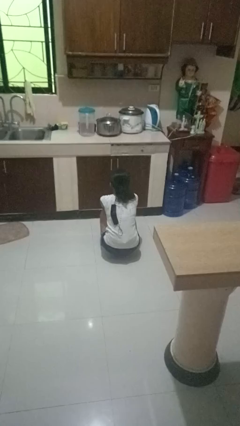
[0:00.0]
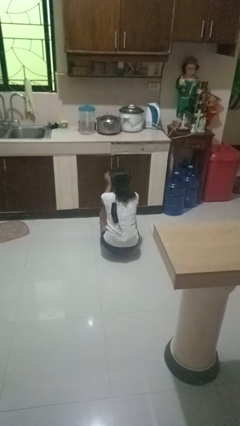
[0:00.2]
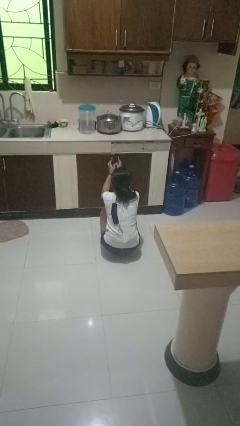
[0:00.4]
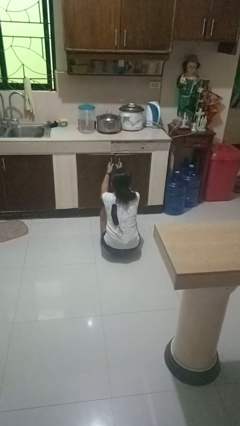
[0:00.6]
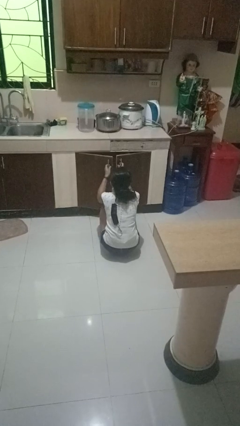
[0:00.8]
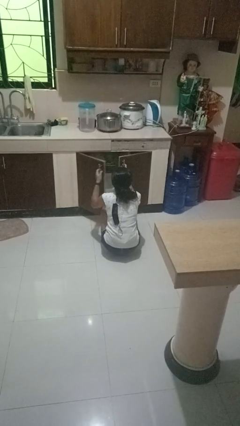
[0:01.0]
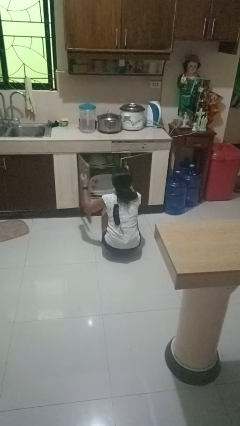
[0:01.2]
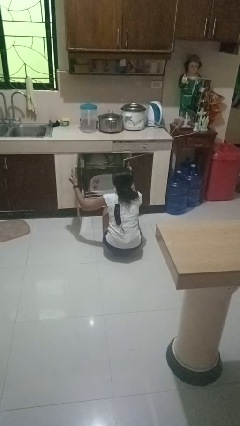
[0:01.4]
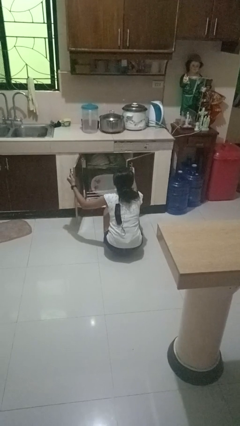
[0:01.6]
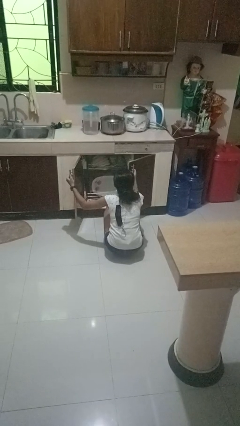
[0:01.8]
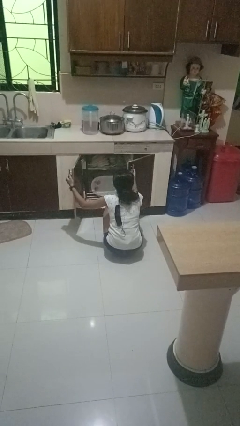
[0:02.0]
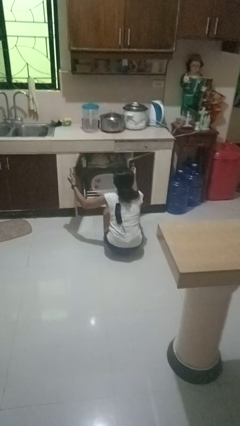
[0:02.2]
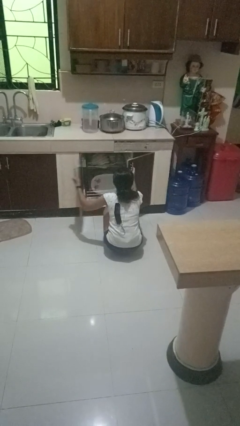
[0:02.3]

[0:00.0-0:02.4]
person opens dishwasher

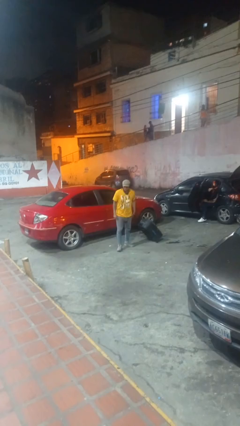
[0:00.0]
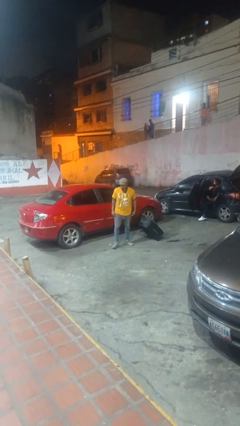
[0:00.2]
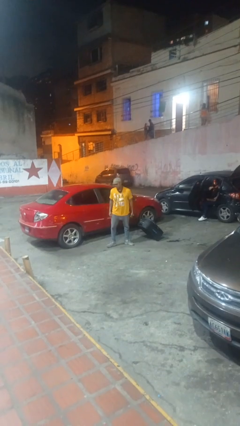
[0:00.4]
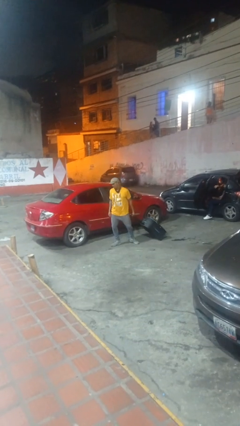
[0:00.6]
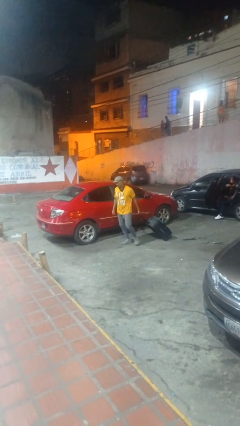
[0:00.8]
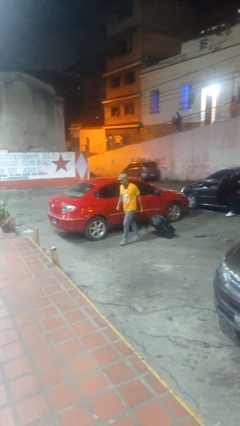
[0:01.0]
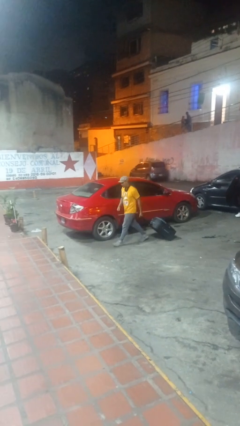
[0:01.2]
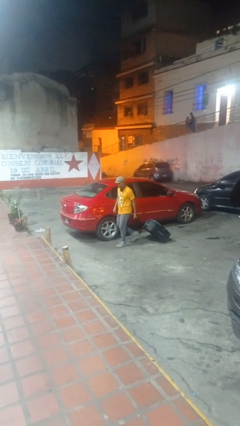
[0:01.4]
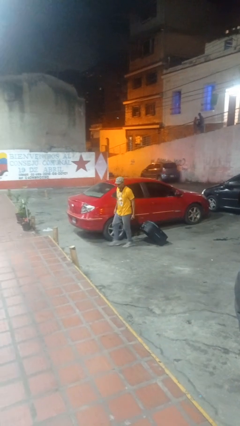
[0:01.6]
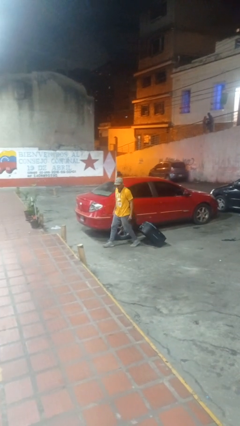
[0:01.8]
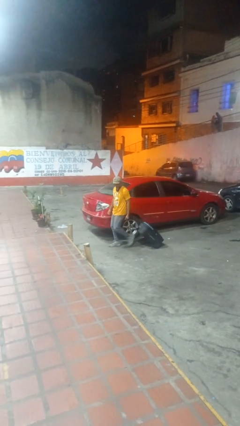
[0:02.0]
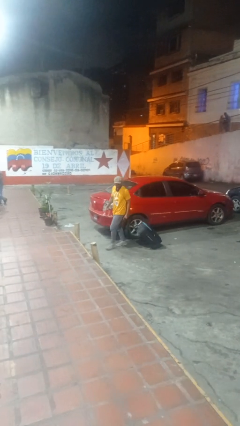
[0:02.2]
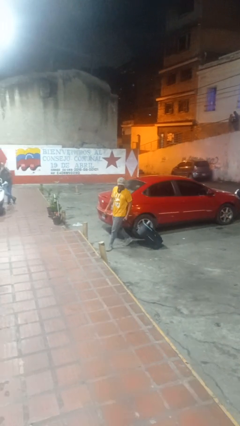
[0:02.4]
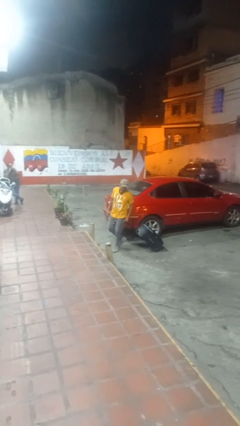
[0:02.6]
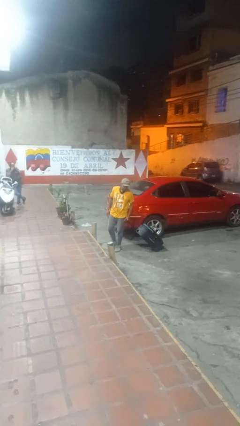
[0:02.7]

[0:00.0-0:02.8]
person pulls wheeled cart

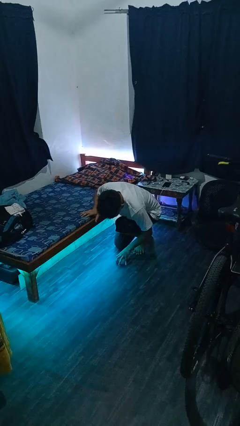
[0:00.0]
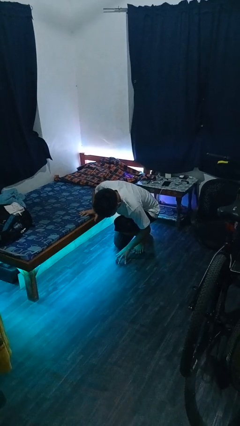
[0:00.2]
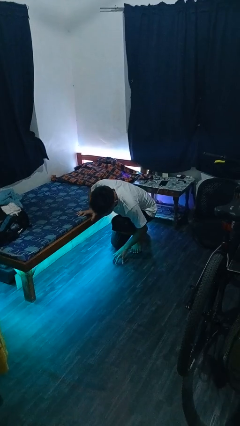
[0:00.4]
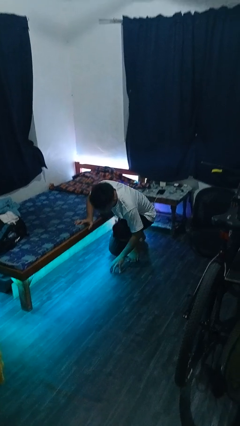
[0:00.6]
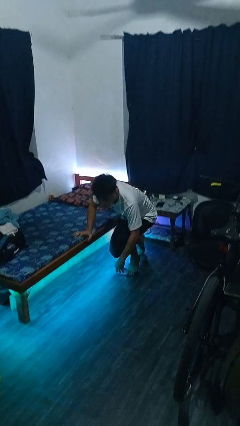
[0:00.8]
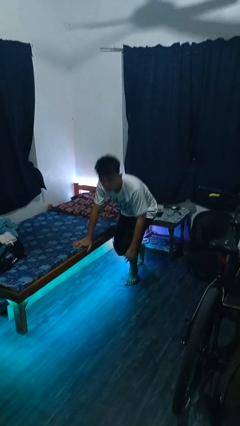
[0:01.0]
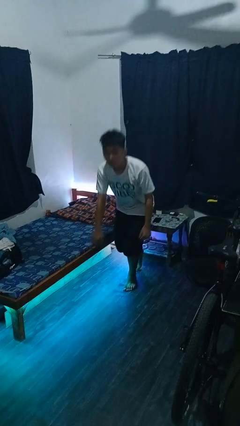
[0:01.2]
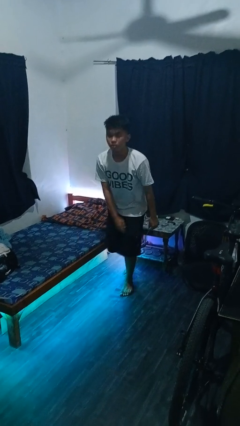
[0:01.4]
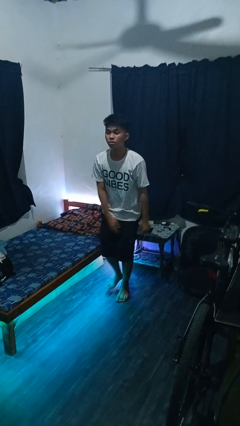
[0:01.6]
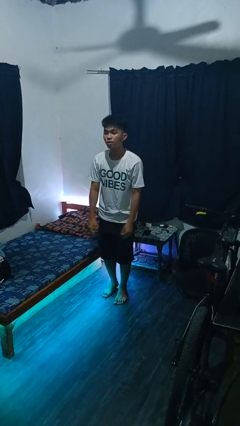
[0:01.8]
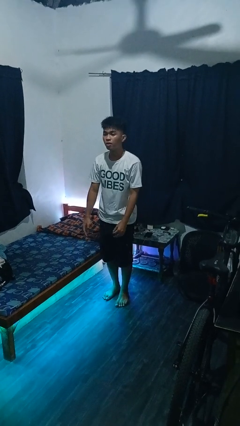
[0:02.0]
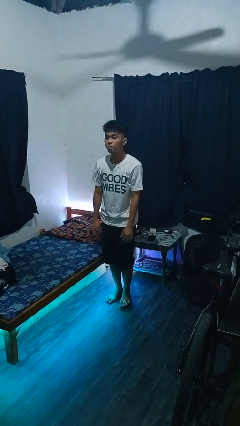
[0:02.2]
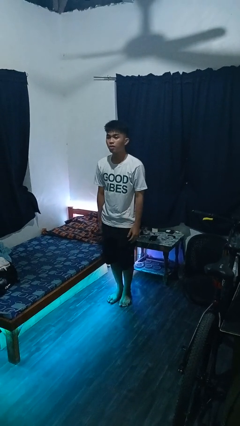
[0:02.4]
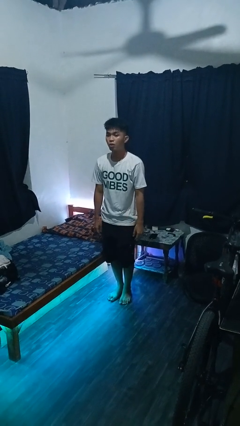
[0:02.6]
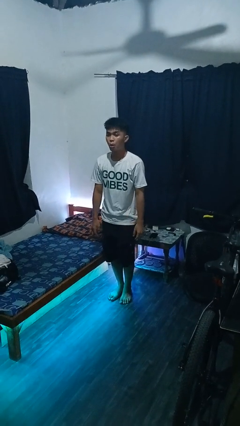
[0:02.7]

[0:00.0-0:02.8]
person stands up from floor

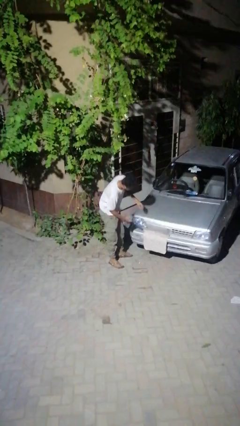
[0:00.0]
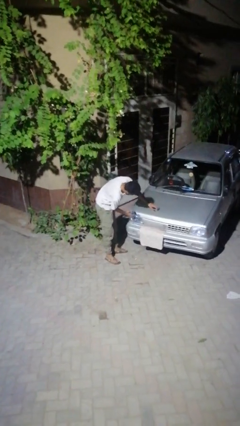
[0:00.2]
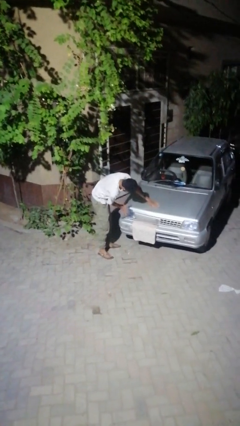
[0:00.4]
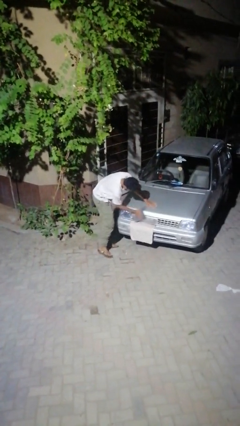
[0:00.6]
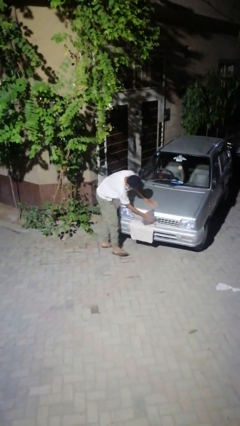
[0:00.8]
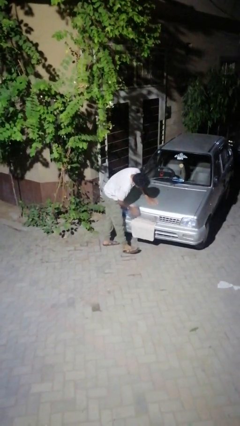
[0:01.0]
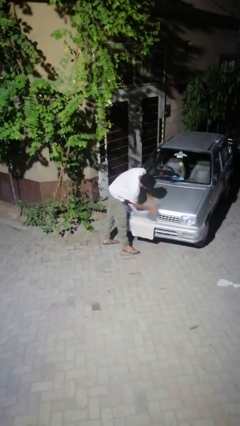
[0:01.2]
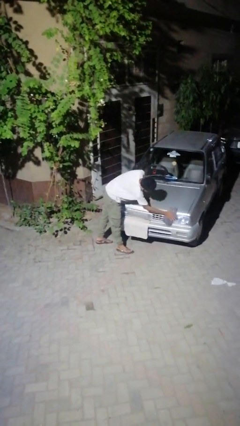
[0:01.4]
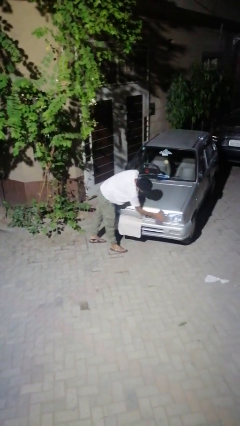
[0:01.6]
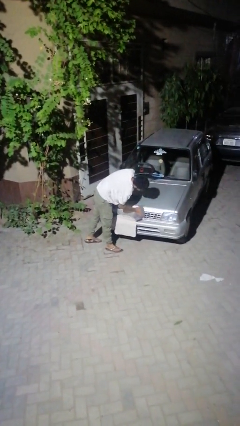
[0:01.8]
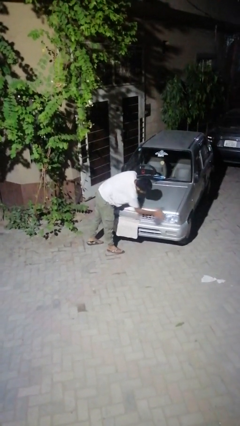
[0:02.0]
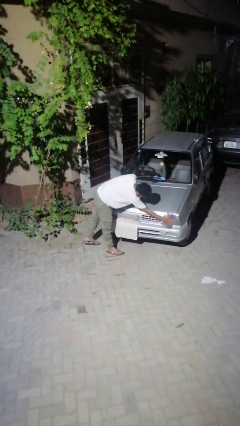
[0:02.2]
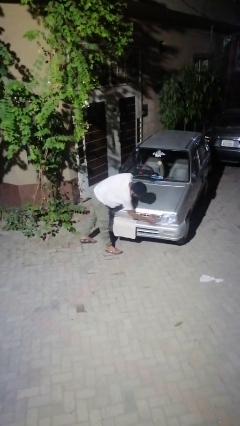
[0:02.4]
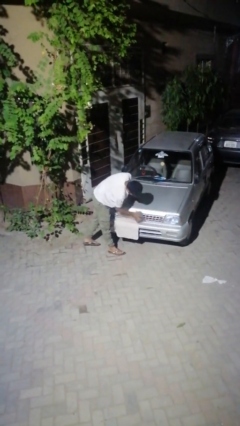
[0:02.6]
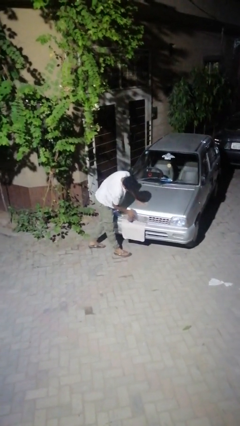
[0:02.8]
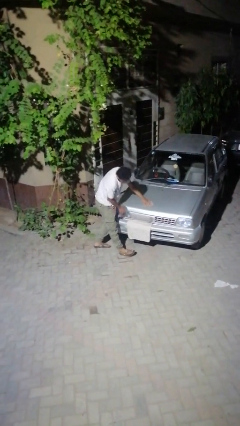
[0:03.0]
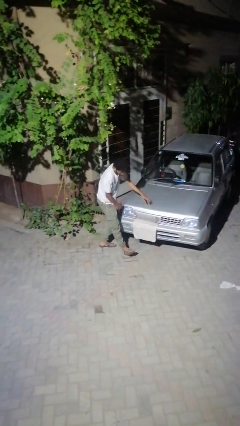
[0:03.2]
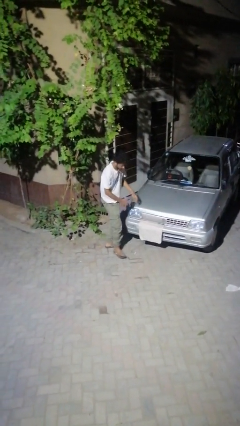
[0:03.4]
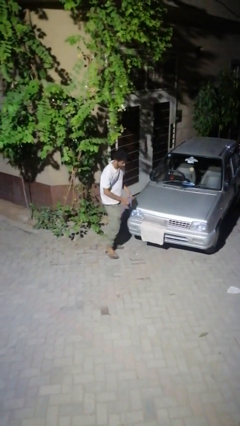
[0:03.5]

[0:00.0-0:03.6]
person polishes car with rag

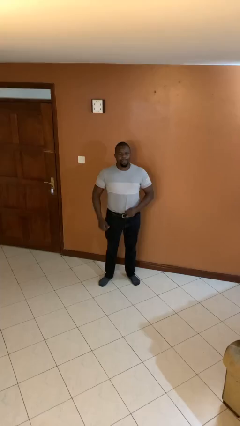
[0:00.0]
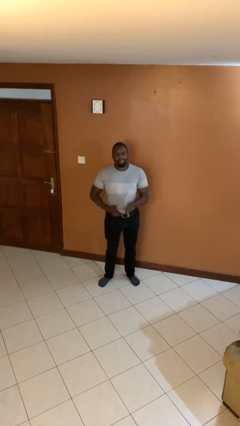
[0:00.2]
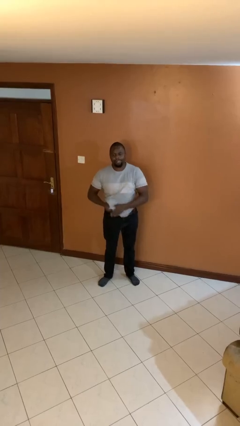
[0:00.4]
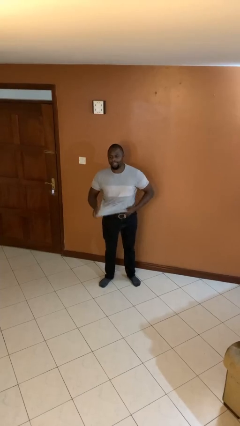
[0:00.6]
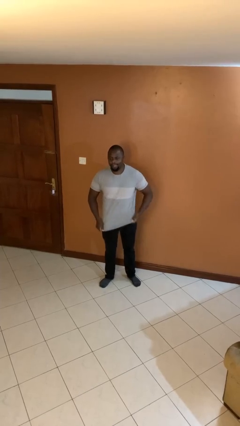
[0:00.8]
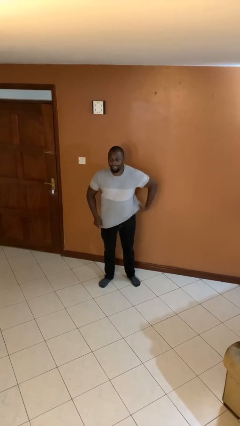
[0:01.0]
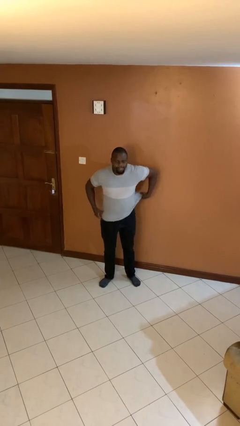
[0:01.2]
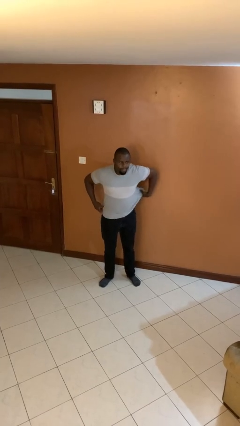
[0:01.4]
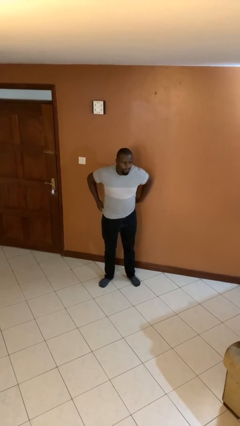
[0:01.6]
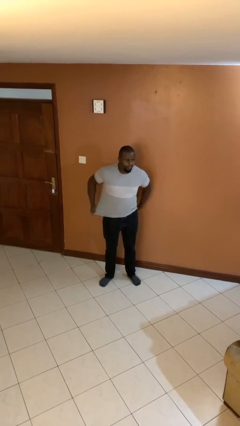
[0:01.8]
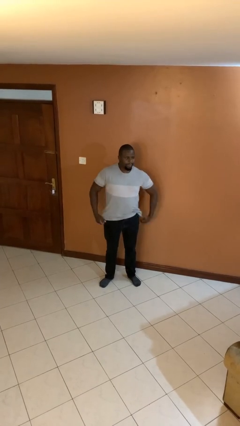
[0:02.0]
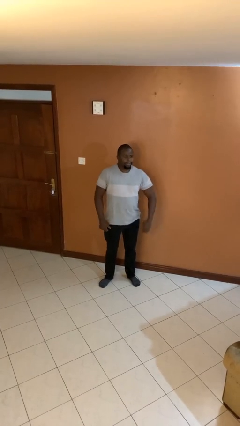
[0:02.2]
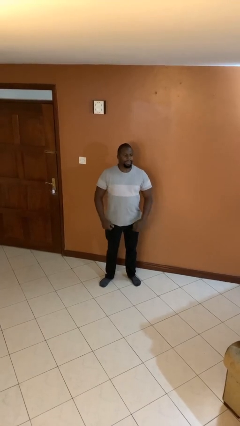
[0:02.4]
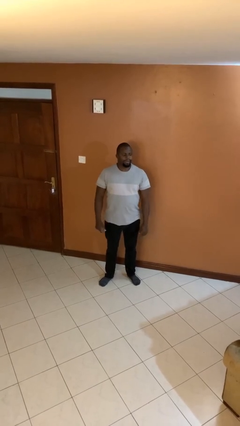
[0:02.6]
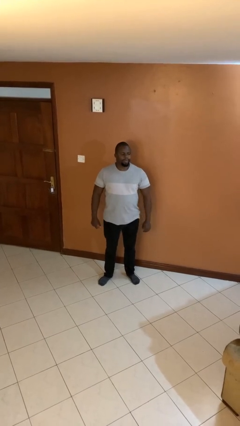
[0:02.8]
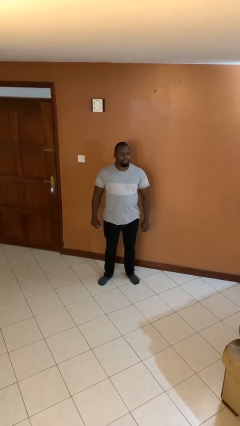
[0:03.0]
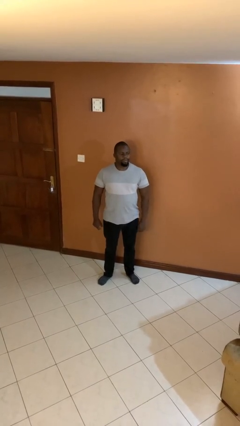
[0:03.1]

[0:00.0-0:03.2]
person untucks shirt

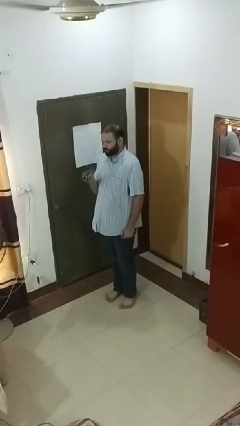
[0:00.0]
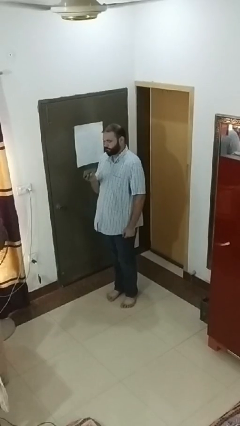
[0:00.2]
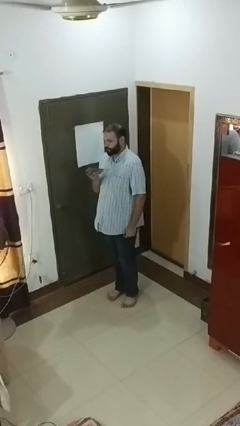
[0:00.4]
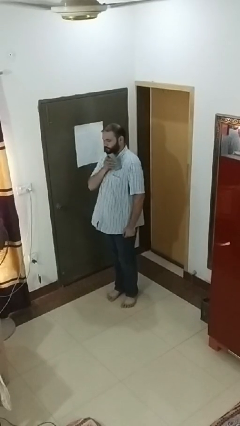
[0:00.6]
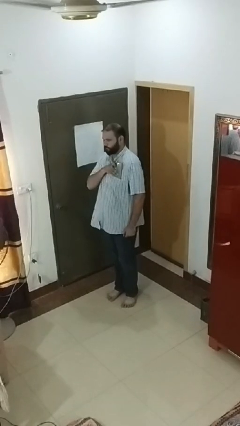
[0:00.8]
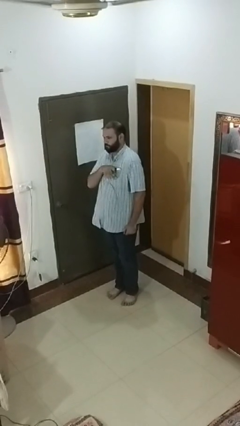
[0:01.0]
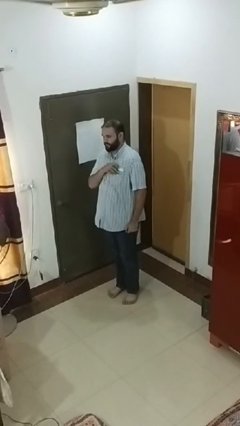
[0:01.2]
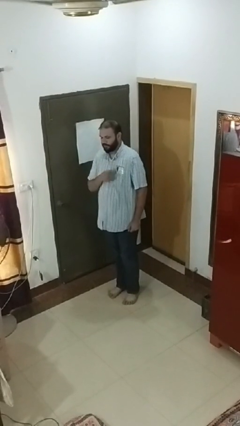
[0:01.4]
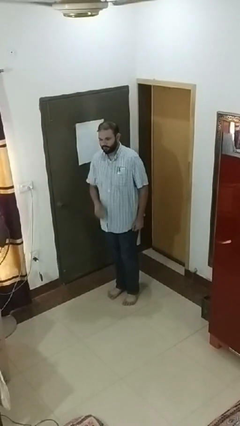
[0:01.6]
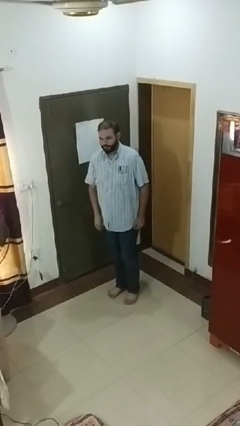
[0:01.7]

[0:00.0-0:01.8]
person puts phone into pocket

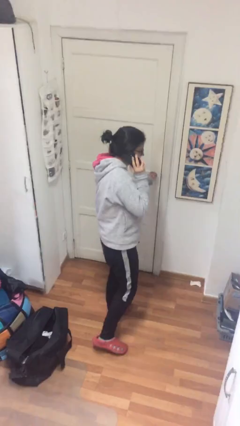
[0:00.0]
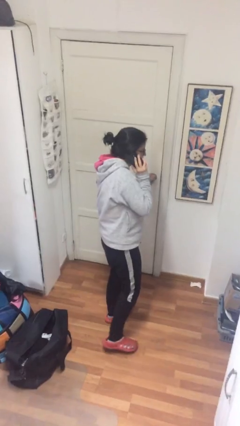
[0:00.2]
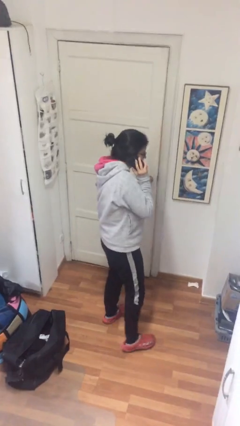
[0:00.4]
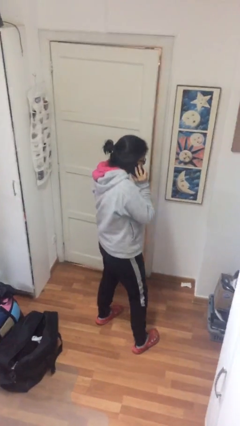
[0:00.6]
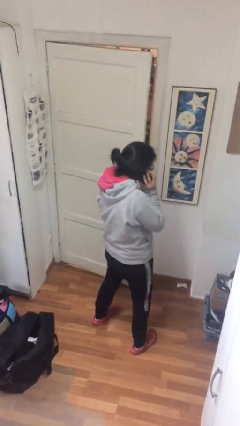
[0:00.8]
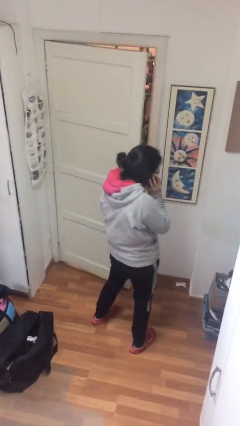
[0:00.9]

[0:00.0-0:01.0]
person opens facility door
